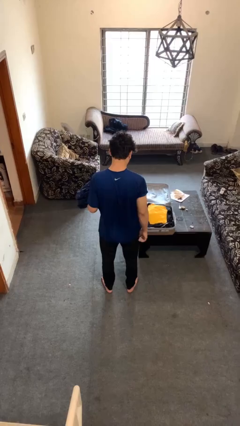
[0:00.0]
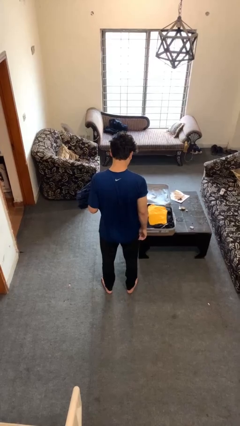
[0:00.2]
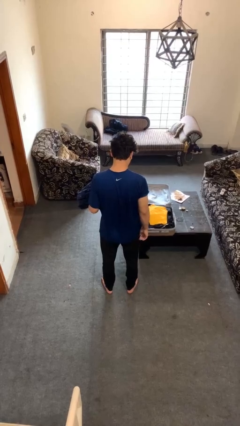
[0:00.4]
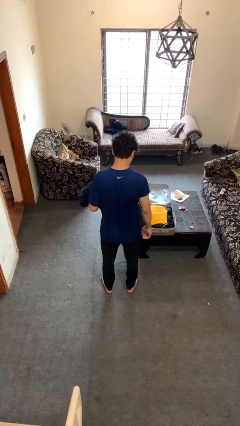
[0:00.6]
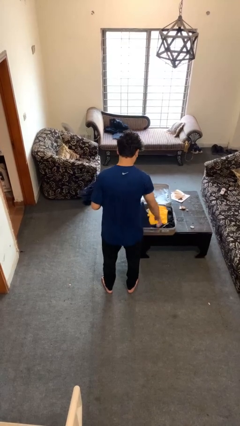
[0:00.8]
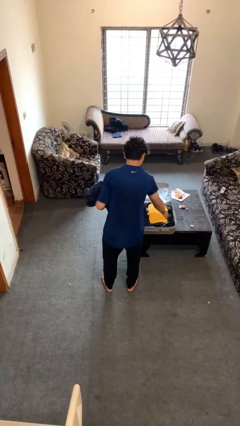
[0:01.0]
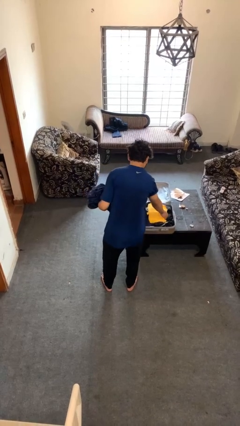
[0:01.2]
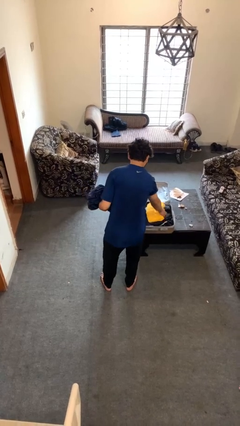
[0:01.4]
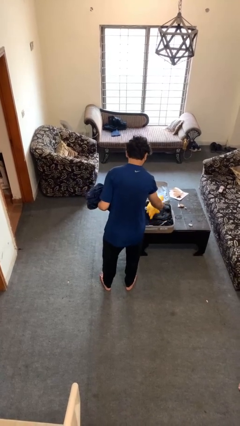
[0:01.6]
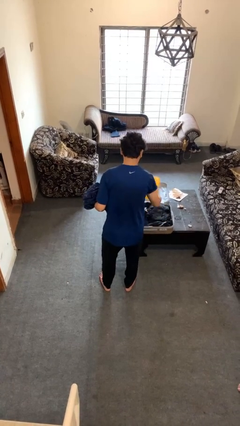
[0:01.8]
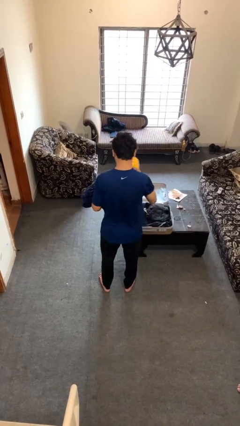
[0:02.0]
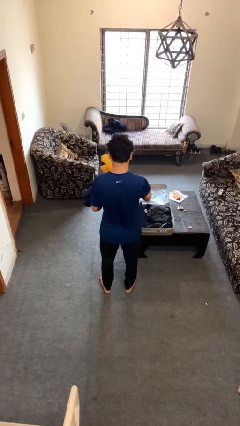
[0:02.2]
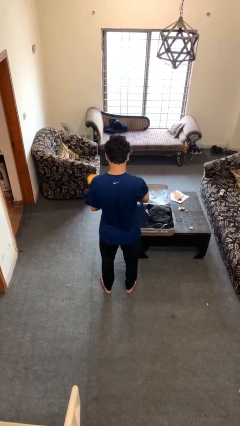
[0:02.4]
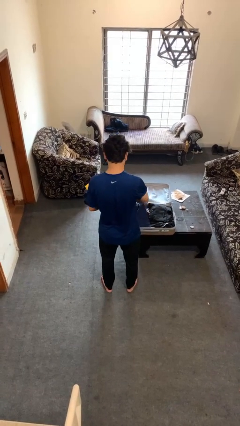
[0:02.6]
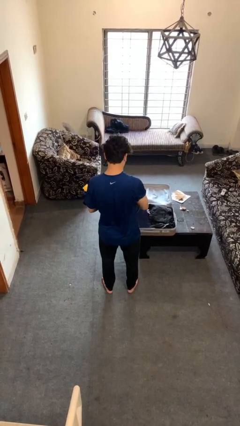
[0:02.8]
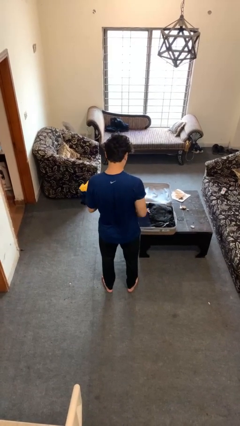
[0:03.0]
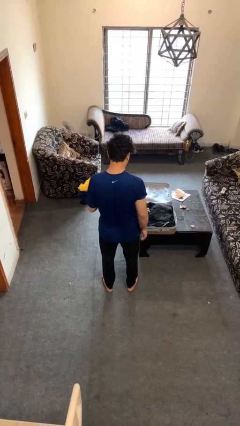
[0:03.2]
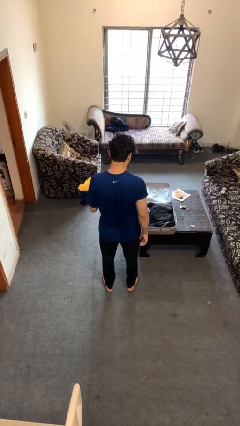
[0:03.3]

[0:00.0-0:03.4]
person unloads clothes from suitcase

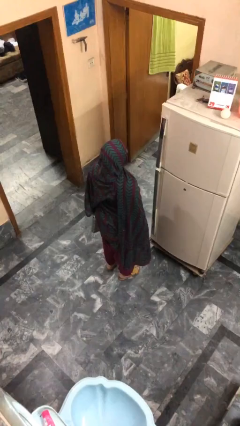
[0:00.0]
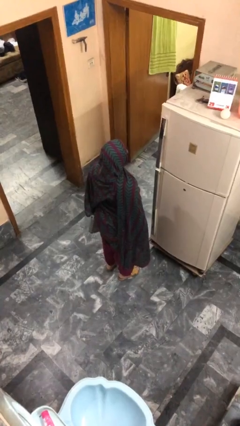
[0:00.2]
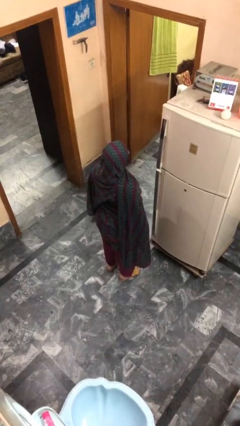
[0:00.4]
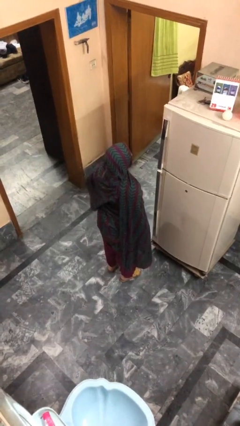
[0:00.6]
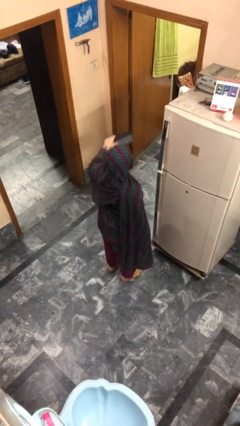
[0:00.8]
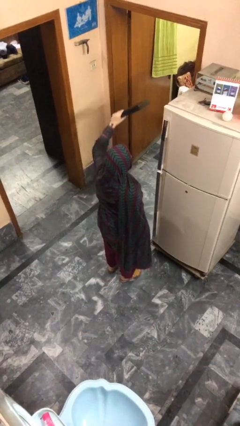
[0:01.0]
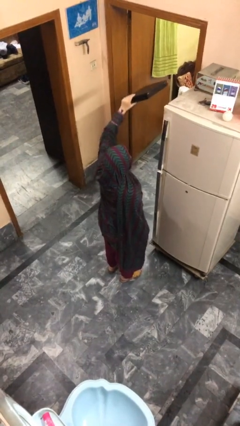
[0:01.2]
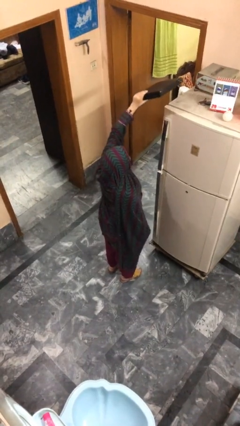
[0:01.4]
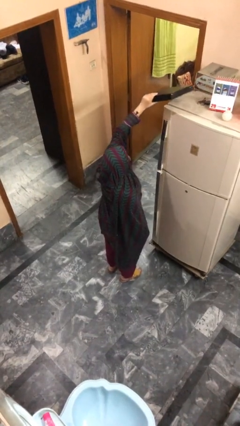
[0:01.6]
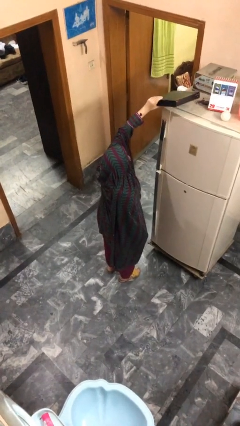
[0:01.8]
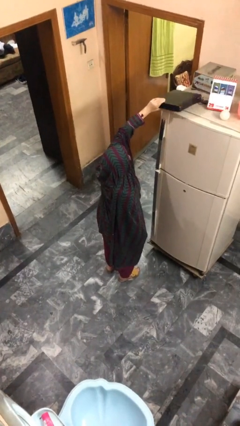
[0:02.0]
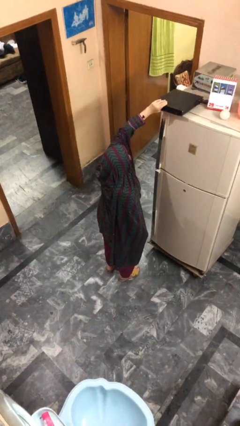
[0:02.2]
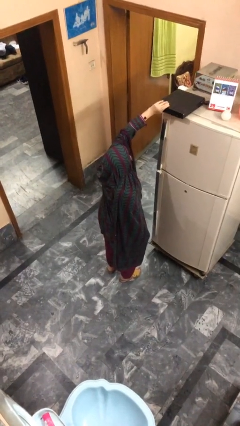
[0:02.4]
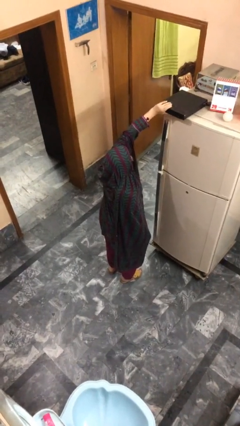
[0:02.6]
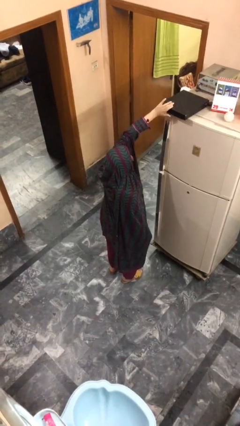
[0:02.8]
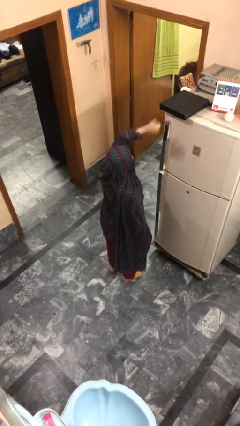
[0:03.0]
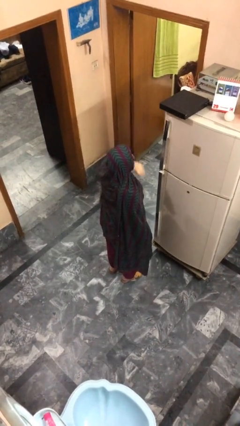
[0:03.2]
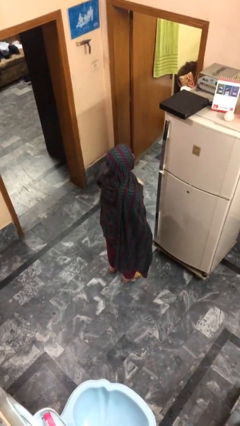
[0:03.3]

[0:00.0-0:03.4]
person puts down object on shelf

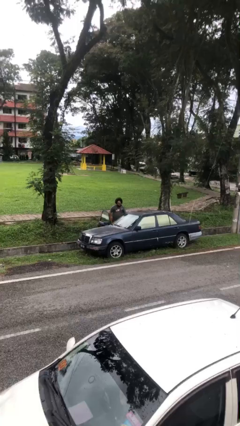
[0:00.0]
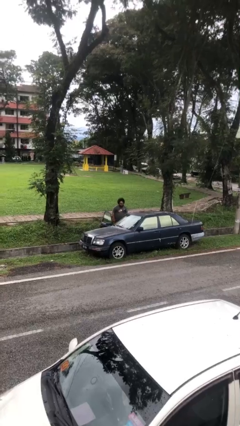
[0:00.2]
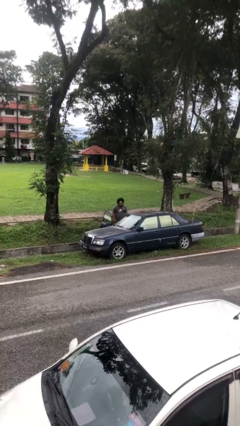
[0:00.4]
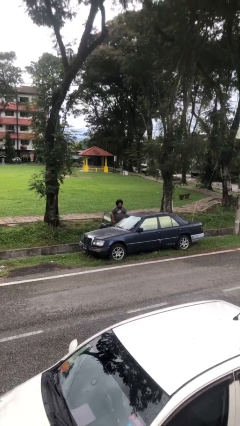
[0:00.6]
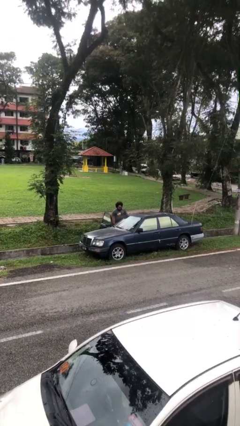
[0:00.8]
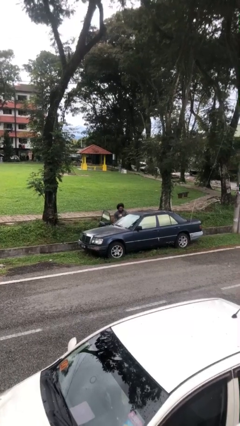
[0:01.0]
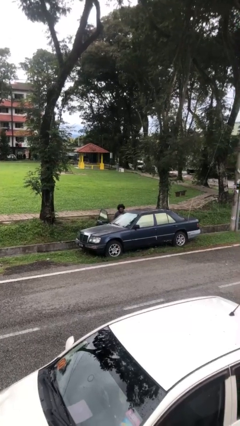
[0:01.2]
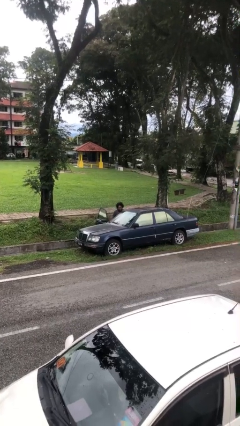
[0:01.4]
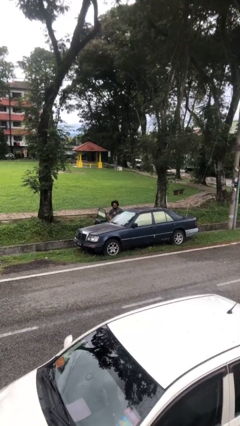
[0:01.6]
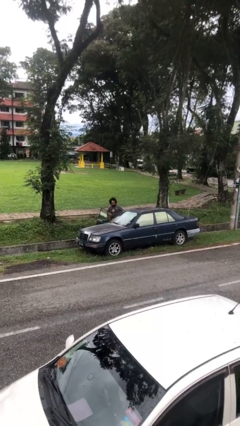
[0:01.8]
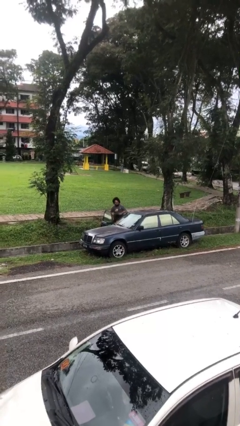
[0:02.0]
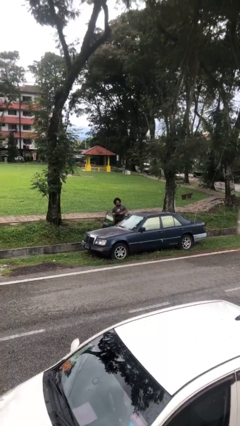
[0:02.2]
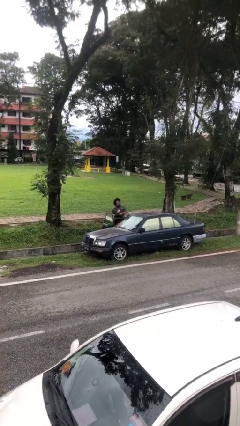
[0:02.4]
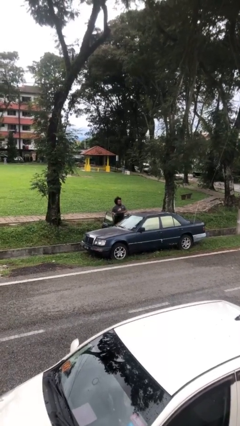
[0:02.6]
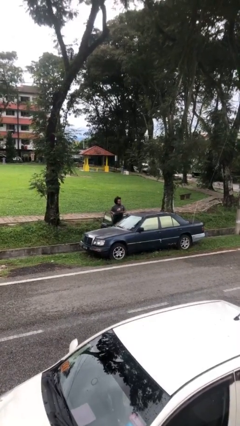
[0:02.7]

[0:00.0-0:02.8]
person unloads car

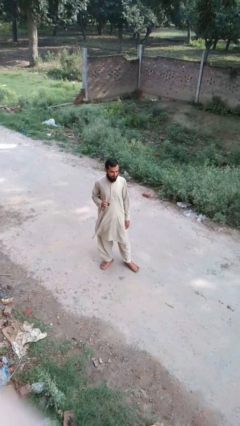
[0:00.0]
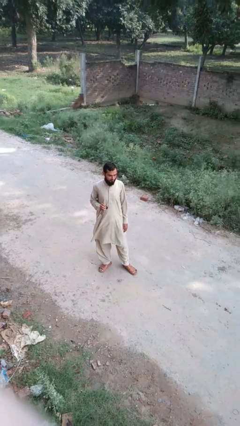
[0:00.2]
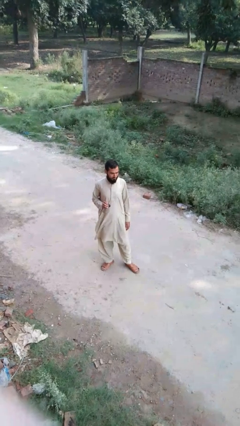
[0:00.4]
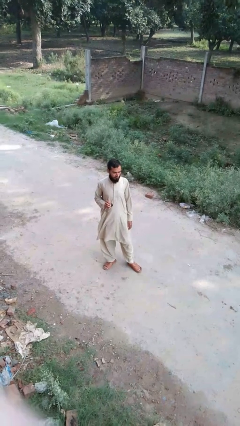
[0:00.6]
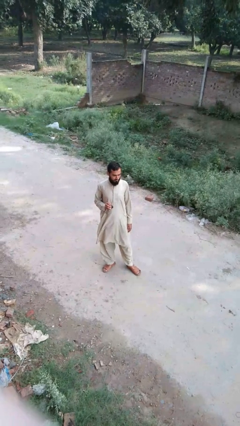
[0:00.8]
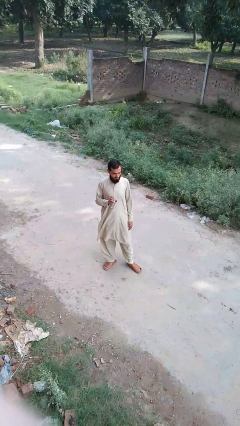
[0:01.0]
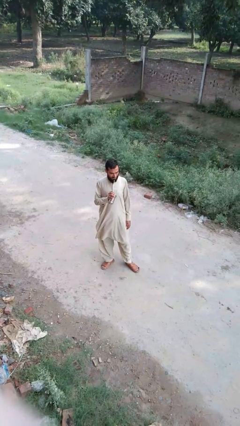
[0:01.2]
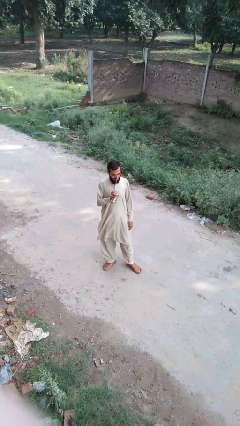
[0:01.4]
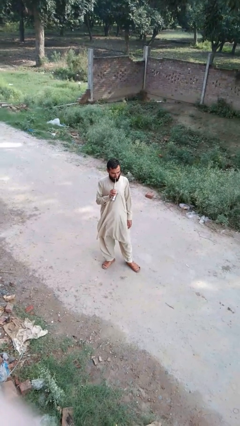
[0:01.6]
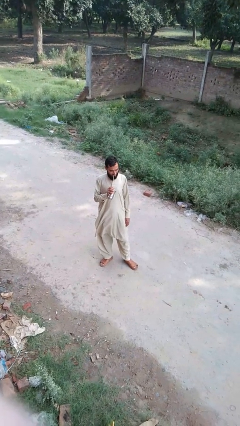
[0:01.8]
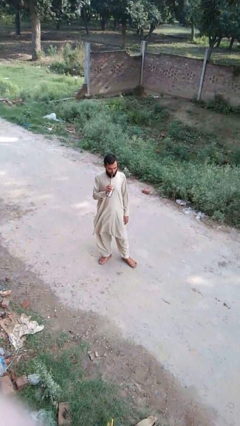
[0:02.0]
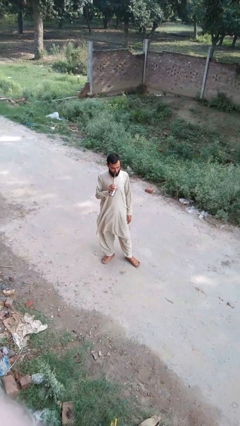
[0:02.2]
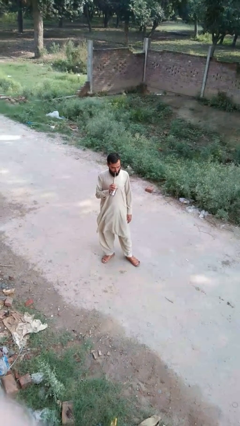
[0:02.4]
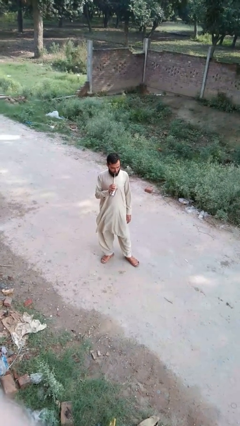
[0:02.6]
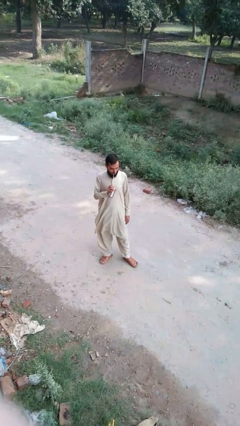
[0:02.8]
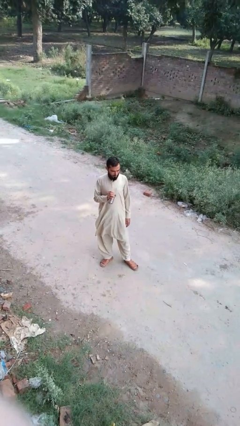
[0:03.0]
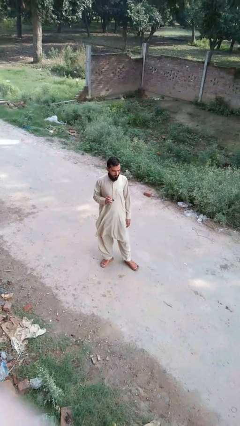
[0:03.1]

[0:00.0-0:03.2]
person drinks from straw

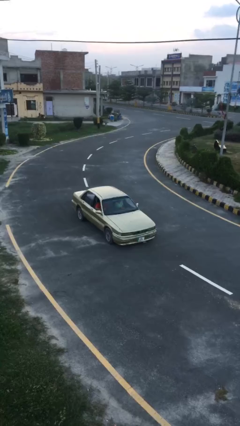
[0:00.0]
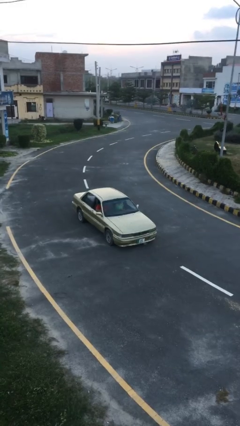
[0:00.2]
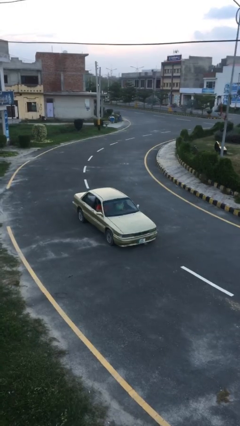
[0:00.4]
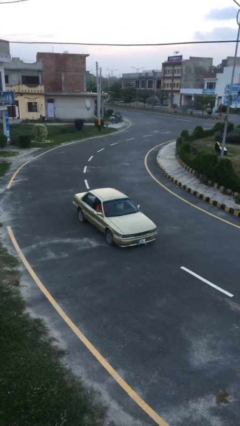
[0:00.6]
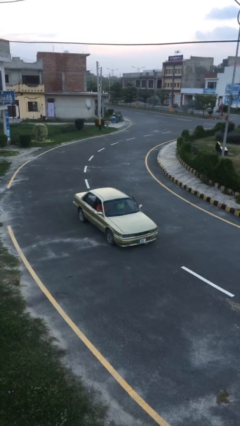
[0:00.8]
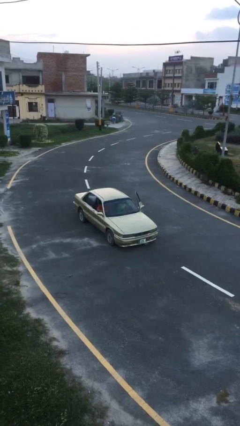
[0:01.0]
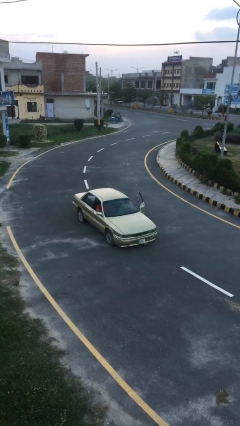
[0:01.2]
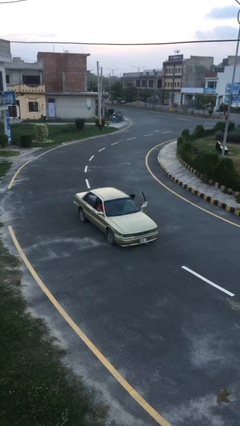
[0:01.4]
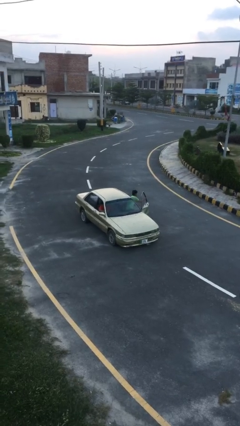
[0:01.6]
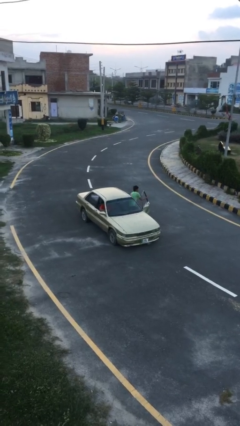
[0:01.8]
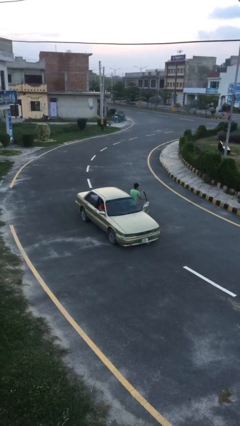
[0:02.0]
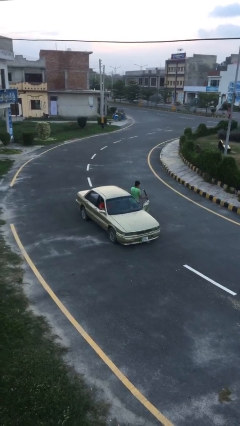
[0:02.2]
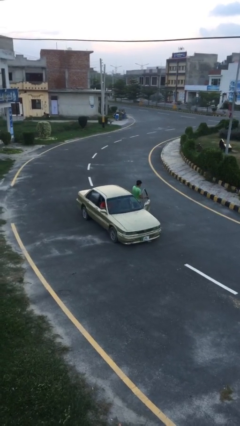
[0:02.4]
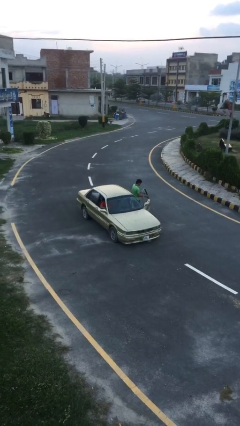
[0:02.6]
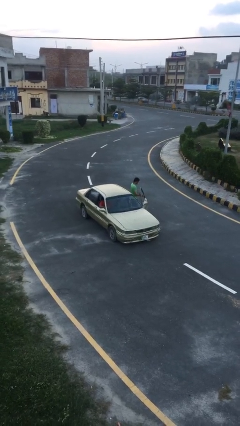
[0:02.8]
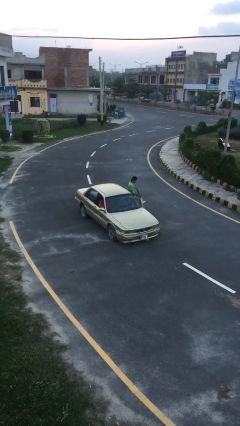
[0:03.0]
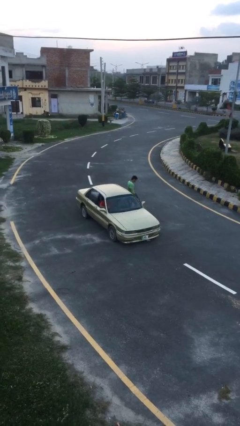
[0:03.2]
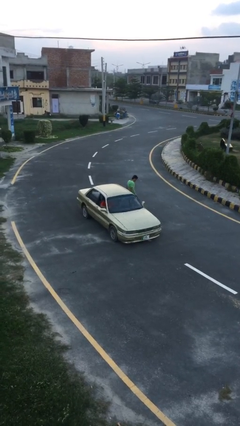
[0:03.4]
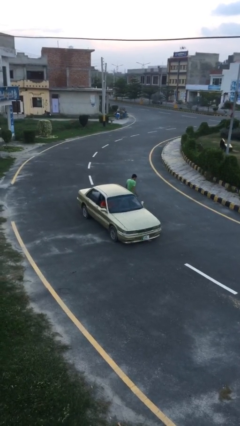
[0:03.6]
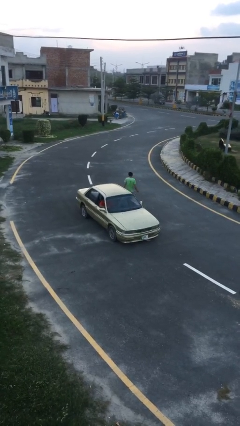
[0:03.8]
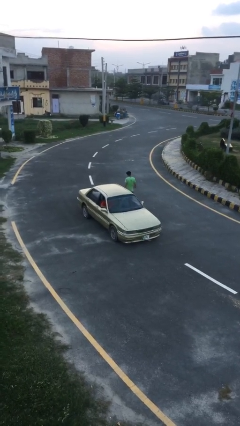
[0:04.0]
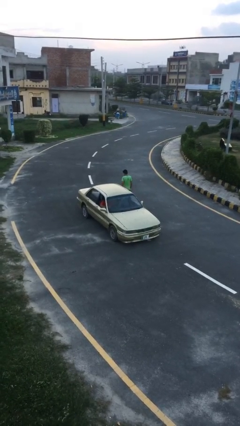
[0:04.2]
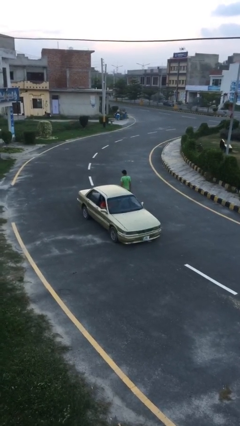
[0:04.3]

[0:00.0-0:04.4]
car drops off person

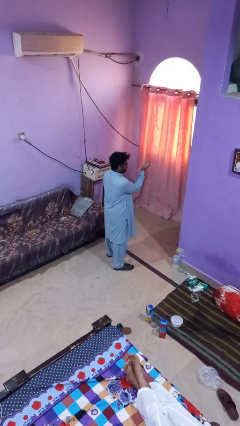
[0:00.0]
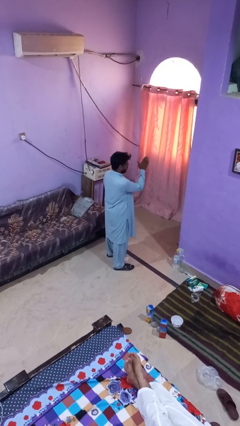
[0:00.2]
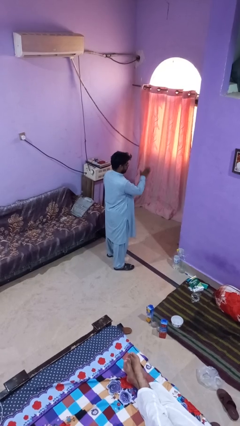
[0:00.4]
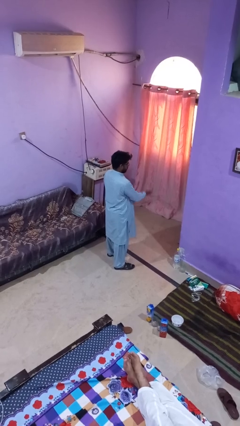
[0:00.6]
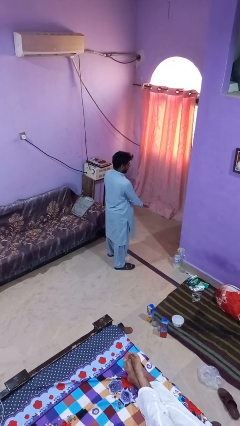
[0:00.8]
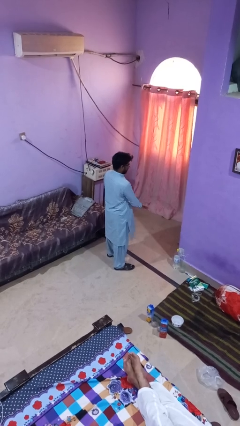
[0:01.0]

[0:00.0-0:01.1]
person gestures swipe down
